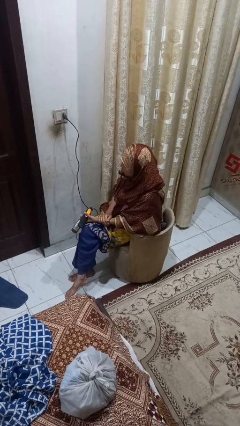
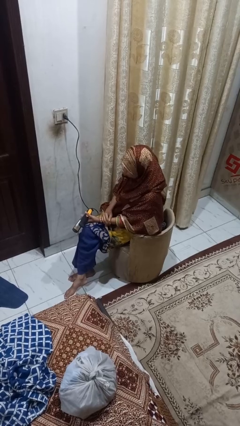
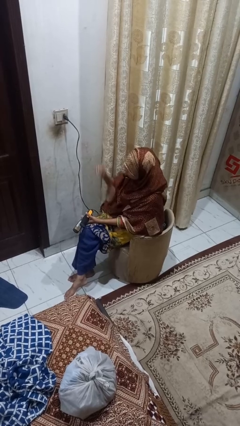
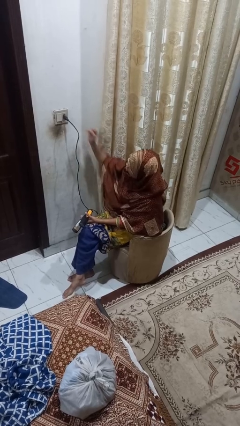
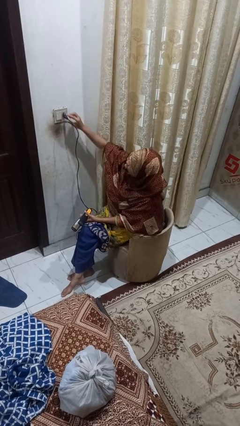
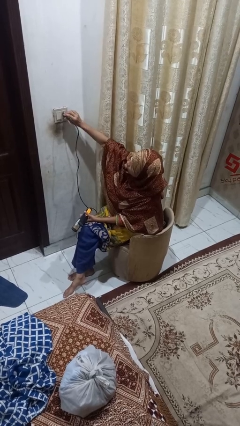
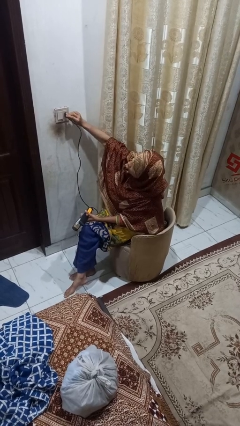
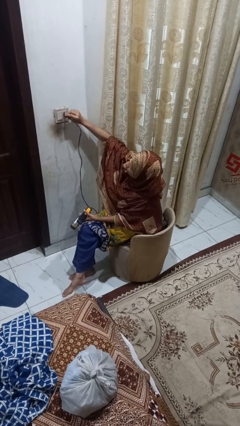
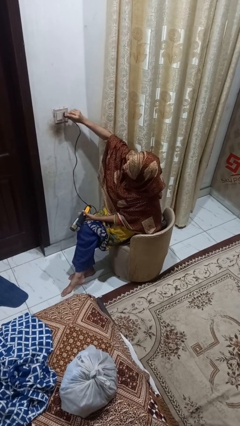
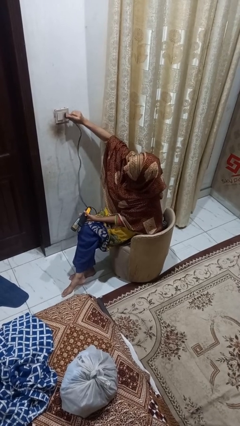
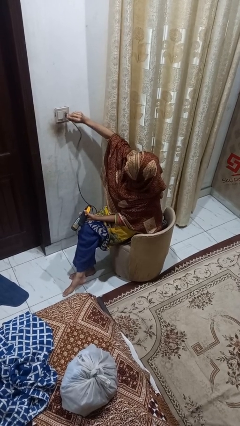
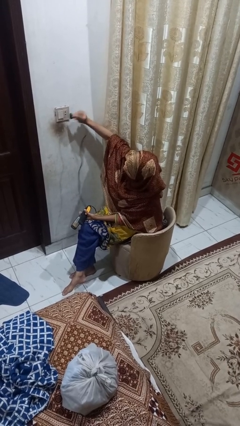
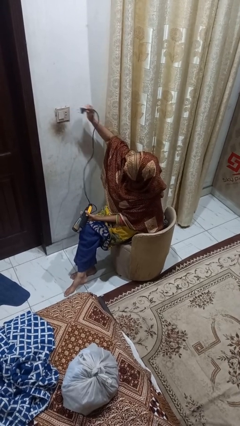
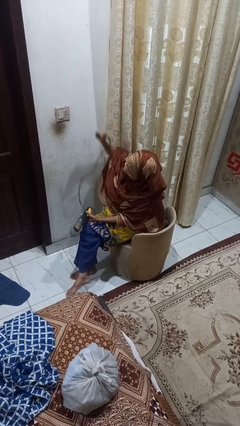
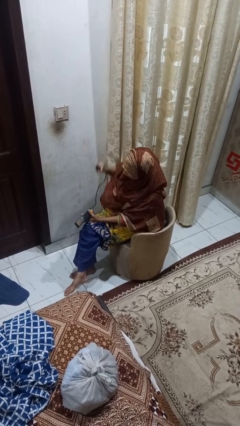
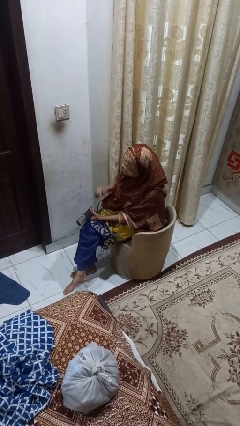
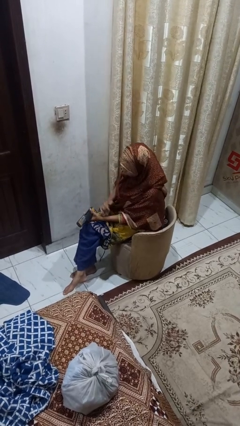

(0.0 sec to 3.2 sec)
person unplugs from electrical socket

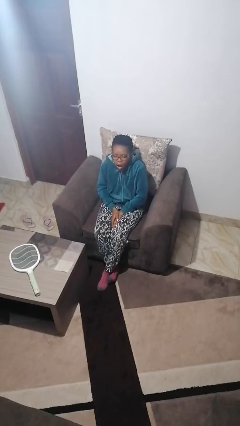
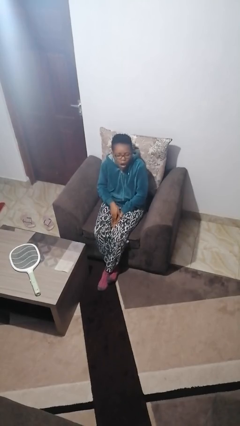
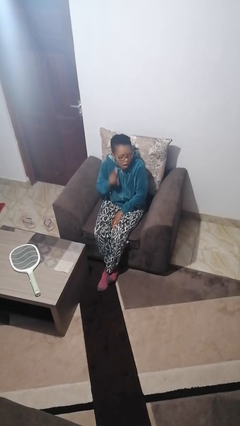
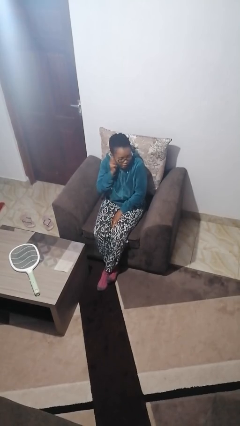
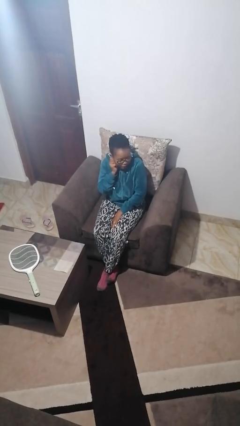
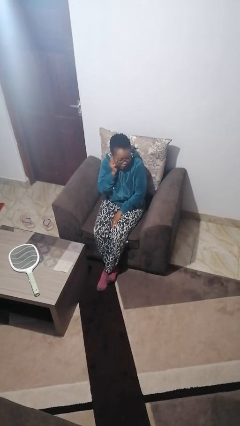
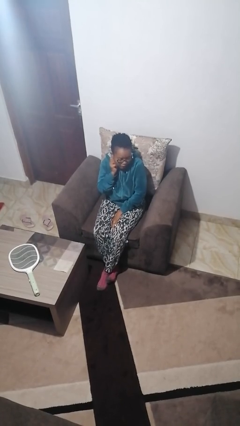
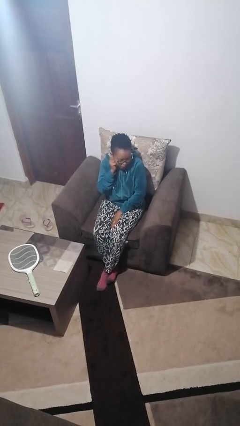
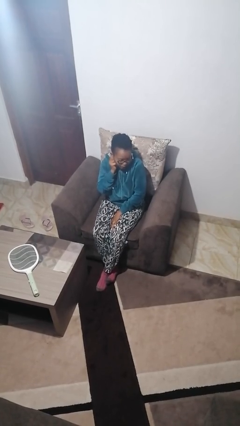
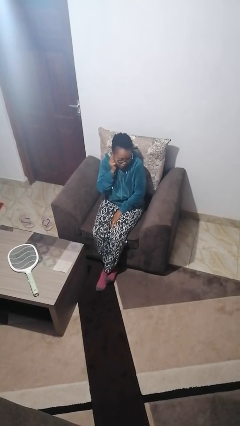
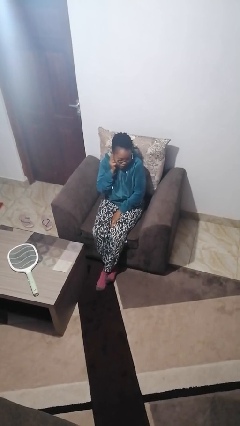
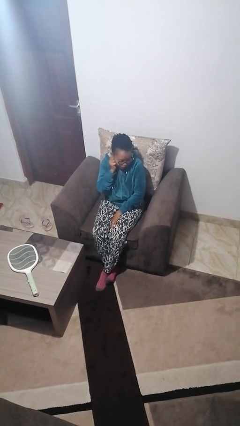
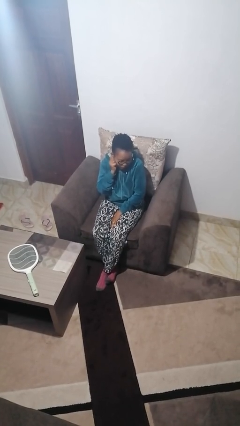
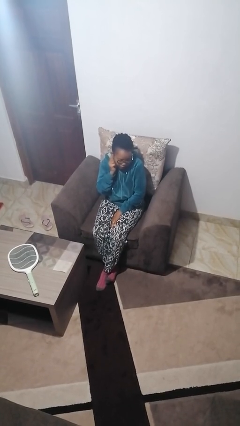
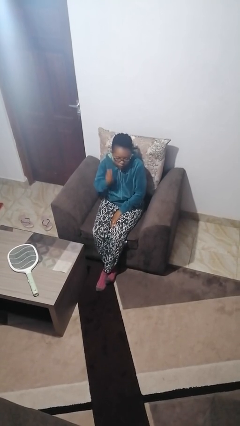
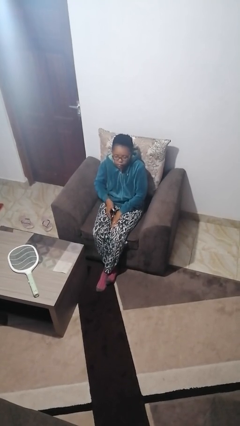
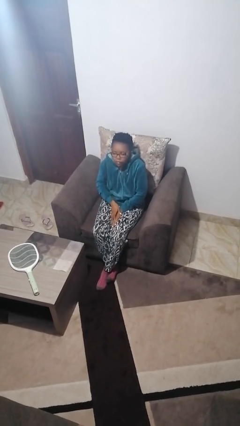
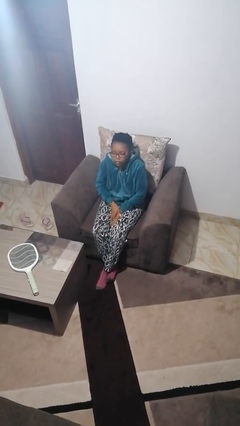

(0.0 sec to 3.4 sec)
person touches earlobe

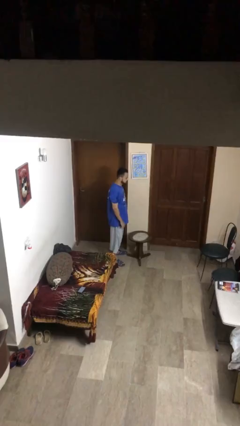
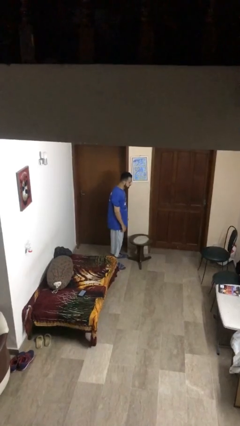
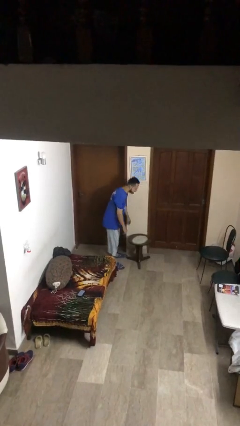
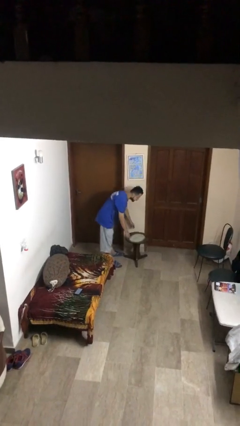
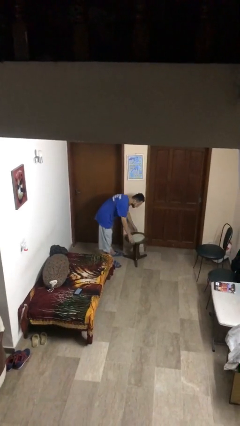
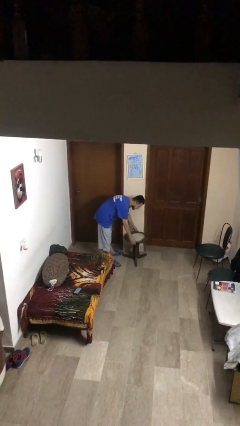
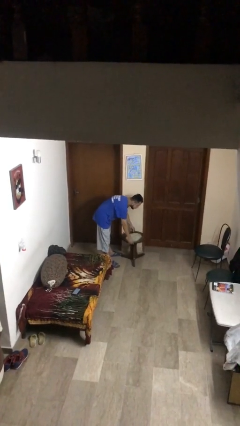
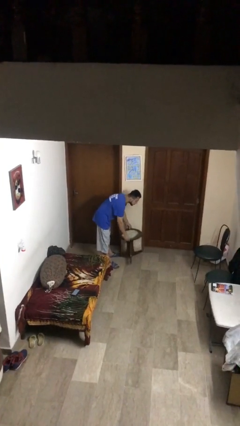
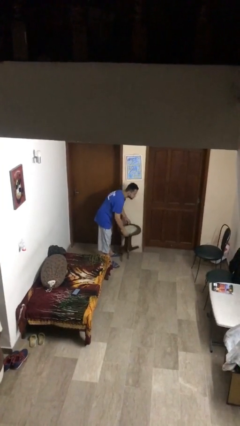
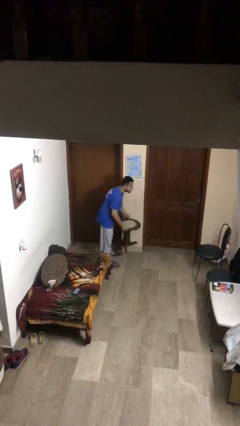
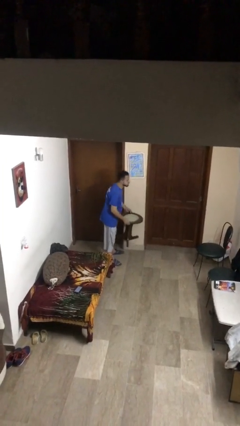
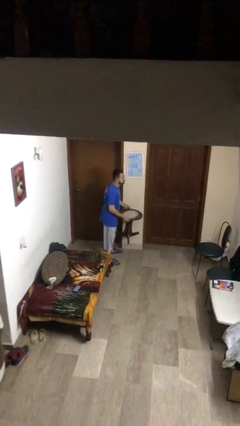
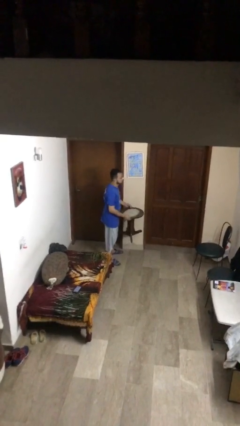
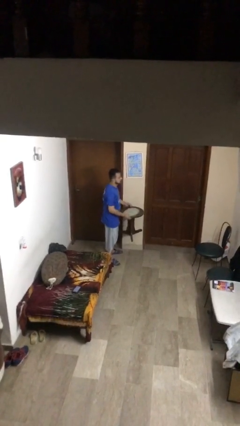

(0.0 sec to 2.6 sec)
person picks up object from floor

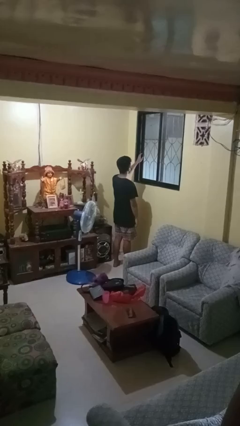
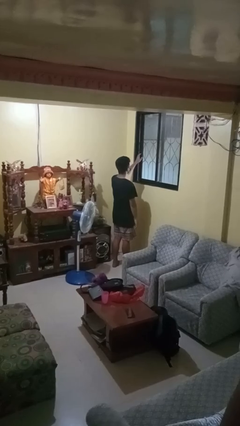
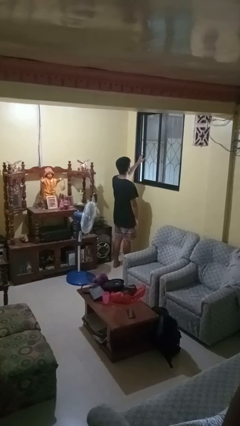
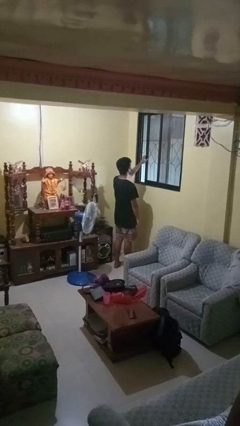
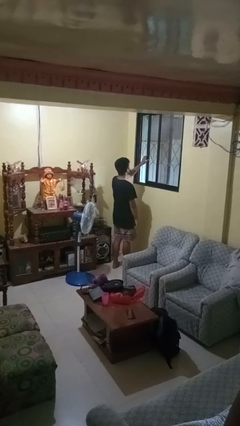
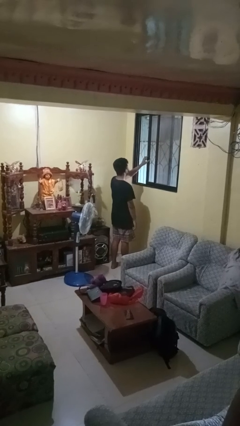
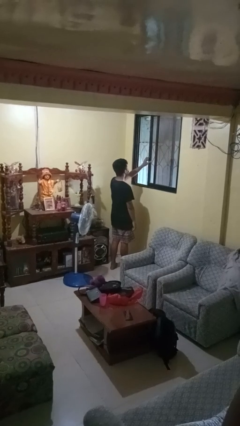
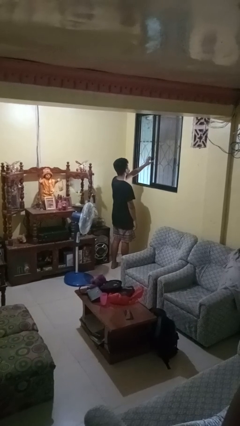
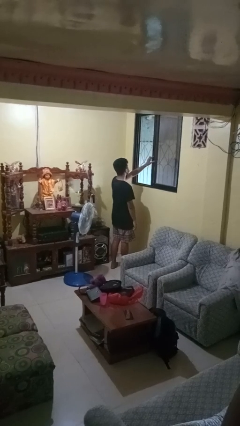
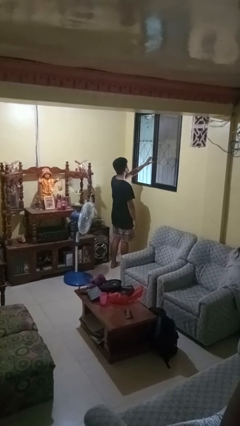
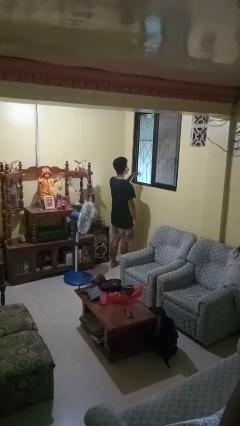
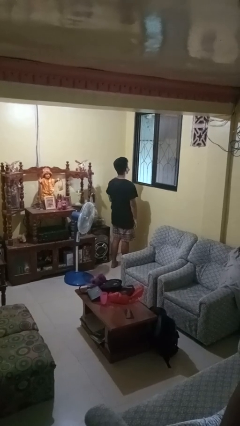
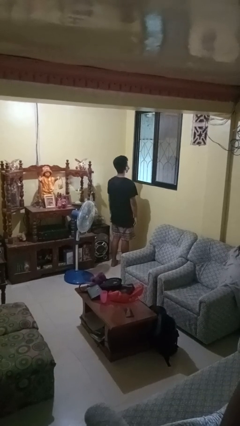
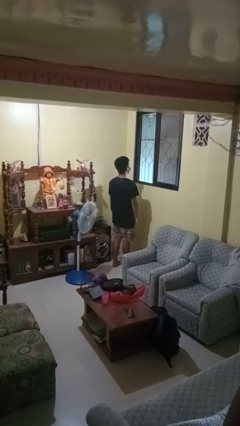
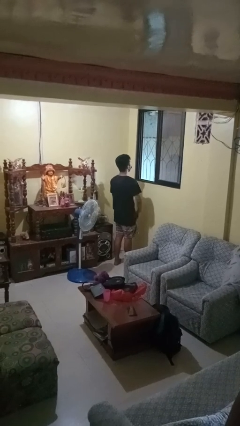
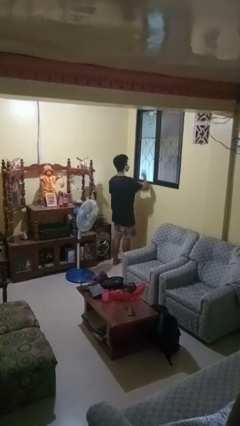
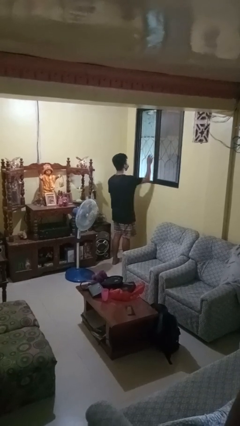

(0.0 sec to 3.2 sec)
person opens home window

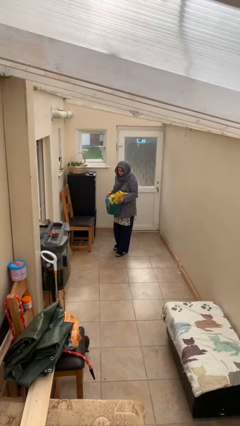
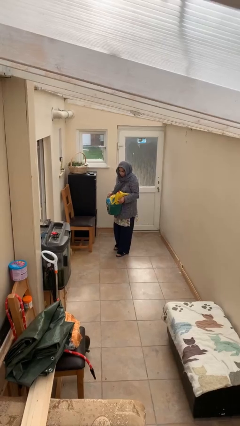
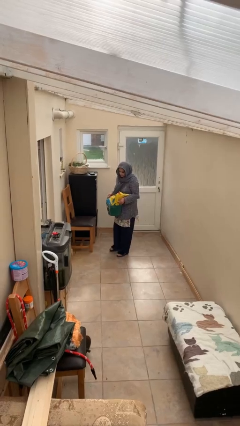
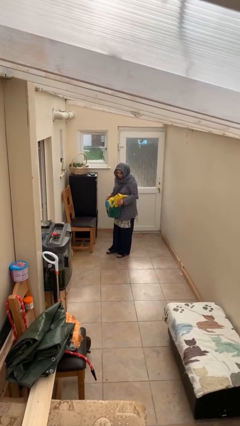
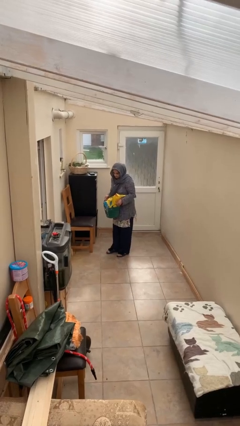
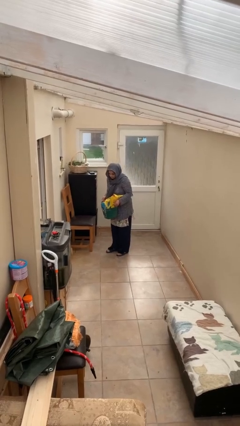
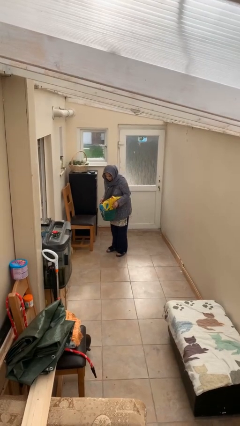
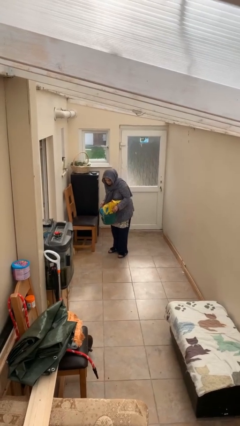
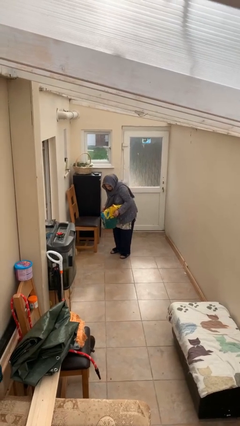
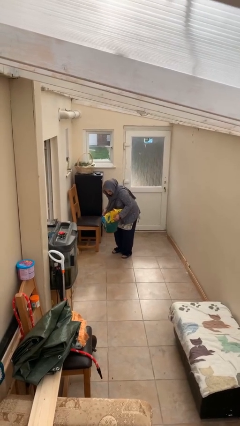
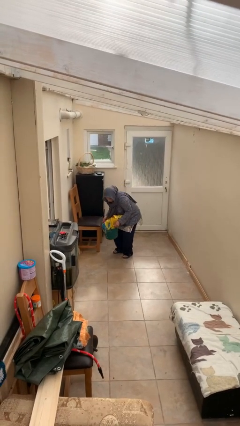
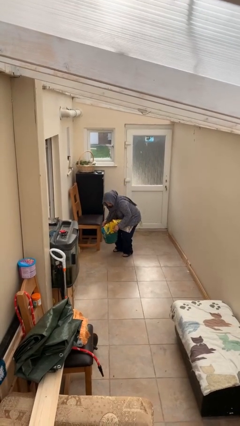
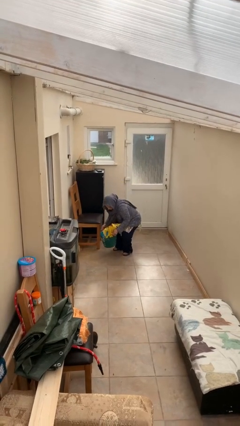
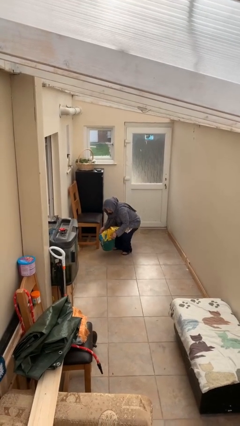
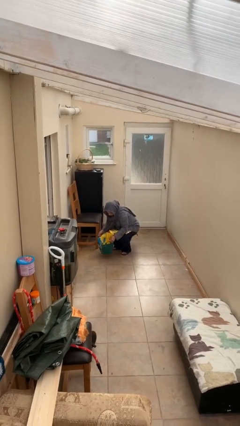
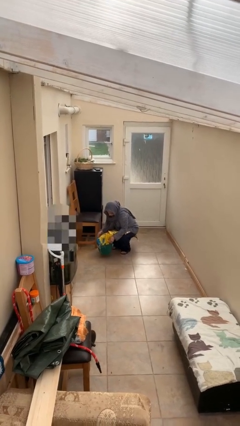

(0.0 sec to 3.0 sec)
person puts down object on floor

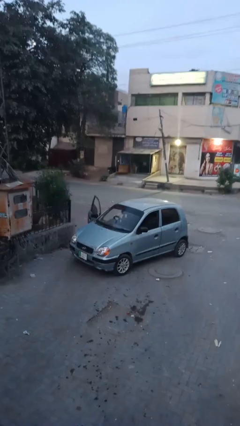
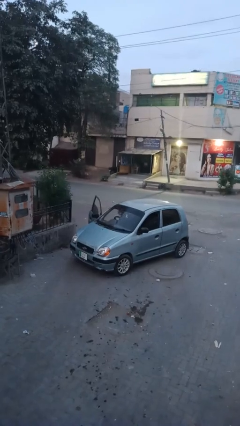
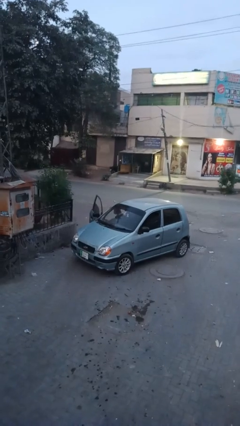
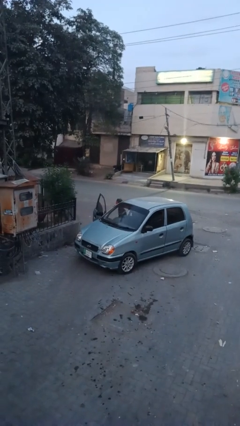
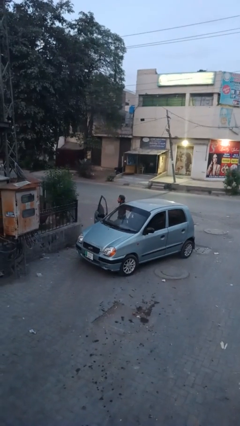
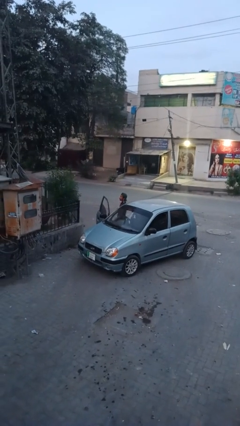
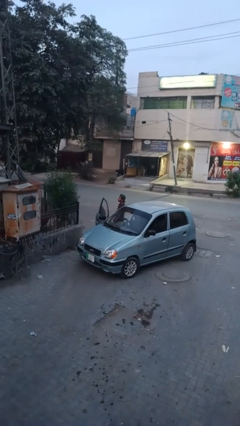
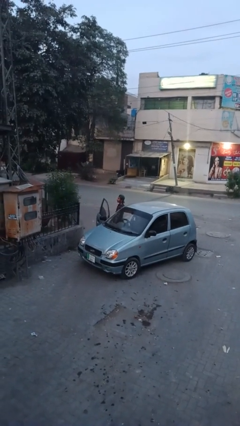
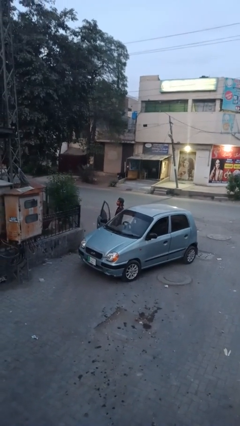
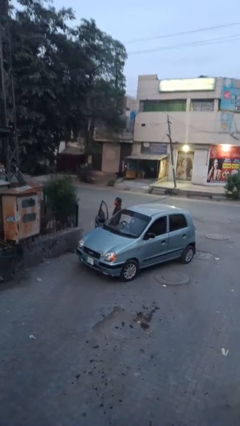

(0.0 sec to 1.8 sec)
person exits car
